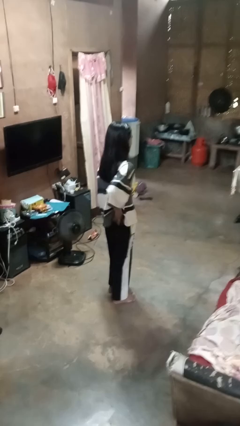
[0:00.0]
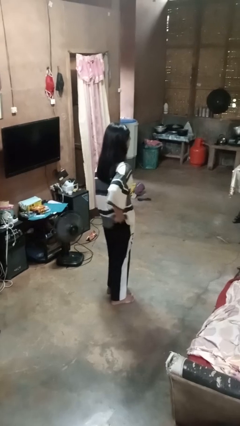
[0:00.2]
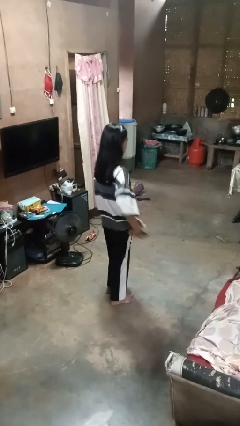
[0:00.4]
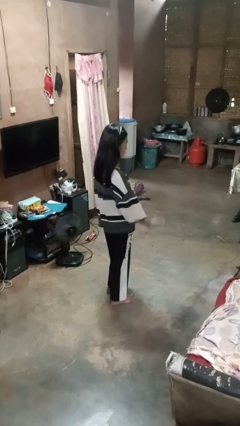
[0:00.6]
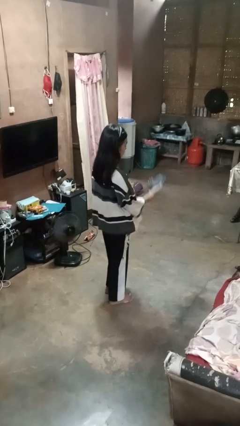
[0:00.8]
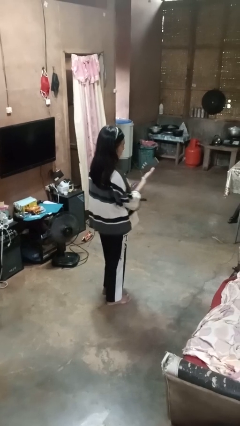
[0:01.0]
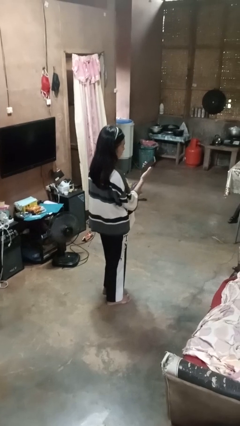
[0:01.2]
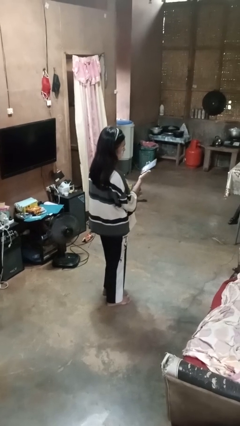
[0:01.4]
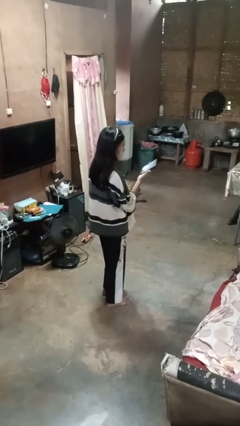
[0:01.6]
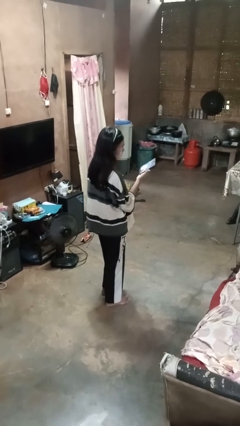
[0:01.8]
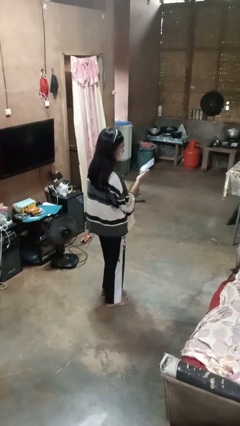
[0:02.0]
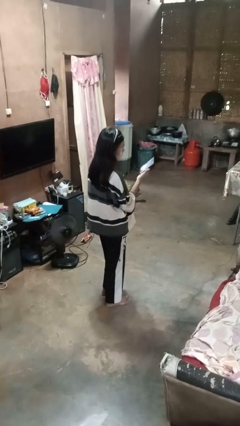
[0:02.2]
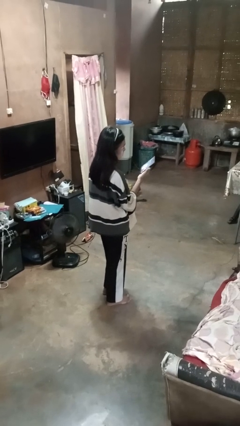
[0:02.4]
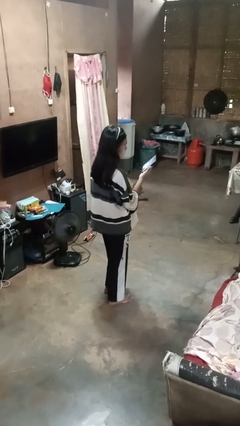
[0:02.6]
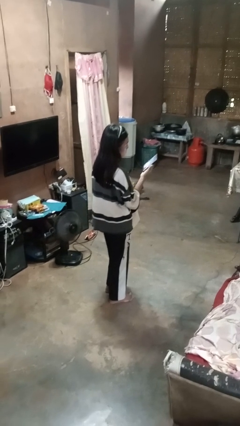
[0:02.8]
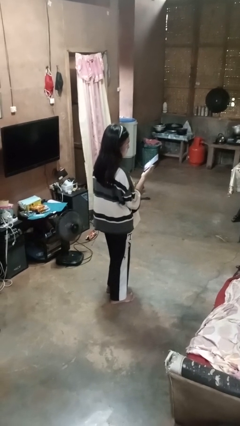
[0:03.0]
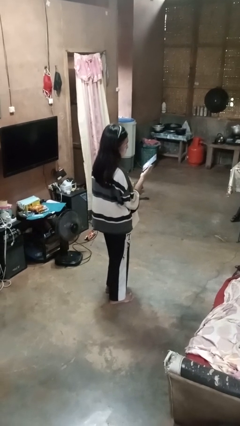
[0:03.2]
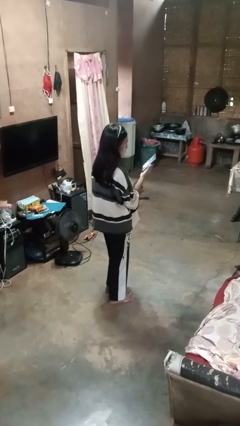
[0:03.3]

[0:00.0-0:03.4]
person takes phone from pocket

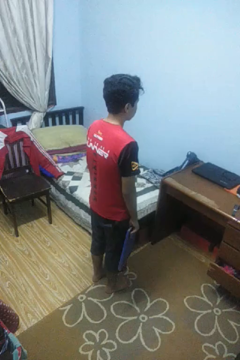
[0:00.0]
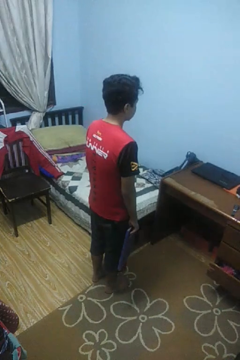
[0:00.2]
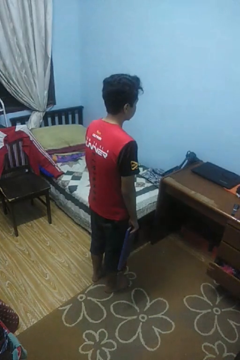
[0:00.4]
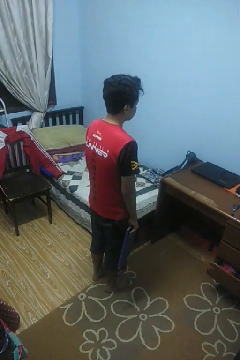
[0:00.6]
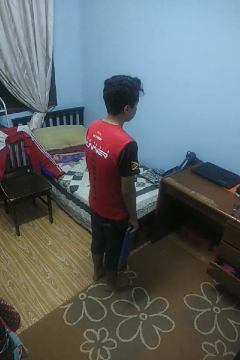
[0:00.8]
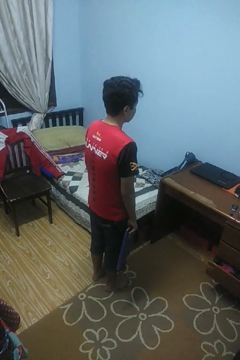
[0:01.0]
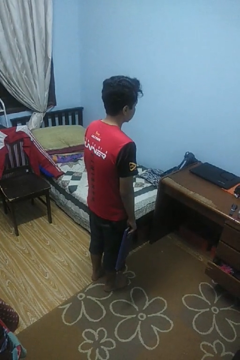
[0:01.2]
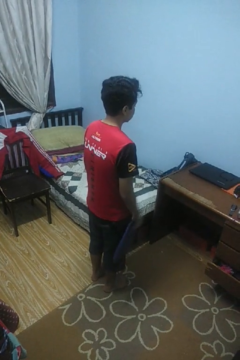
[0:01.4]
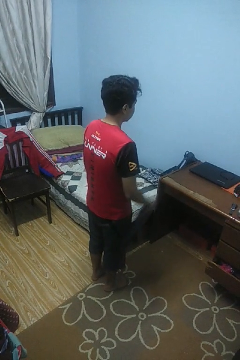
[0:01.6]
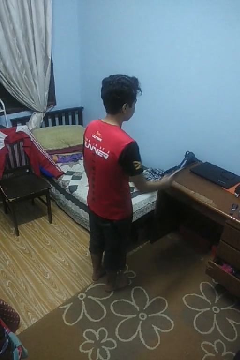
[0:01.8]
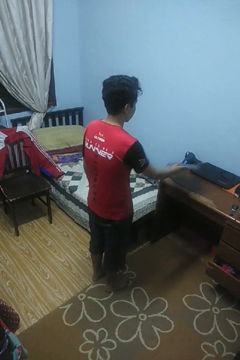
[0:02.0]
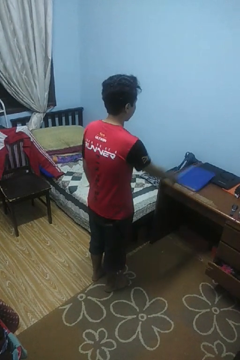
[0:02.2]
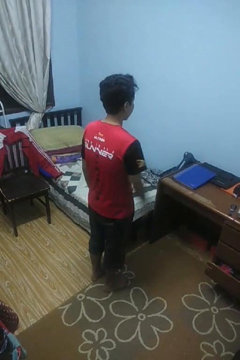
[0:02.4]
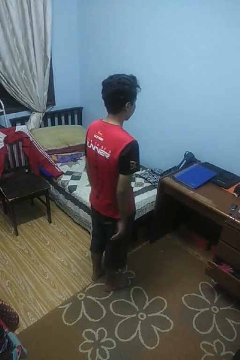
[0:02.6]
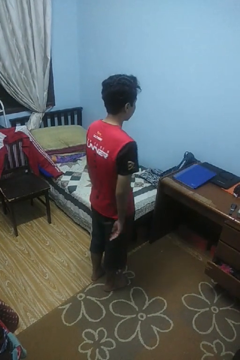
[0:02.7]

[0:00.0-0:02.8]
person throws object on table

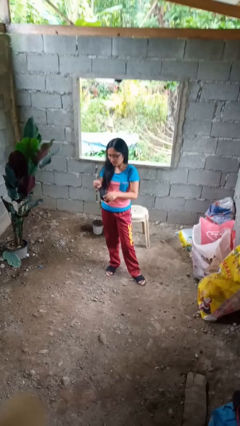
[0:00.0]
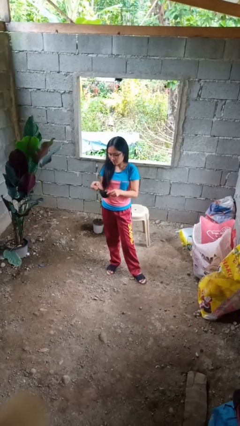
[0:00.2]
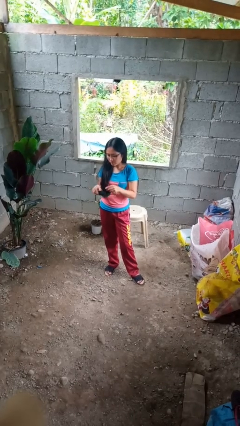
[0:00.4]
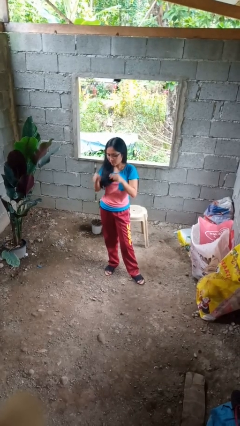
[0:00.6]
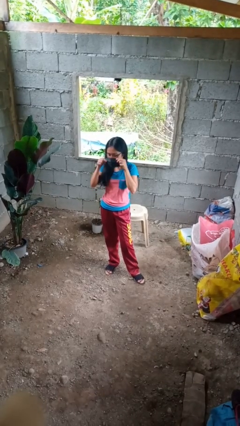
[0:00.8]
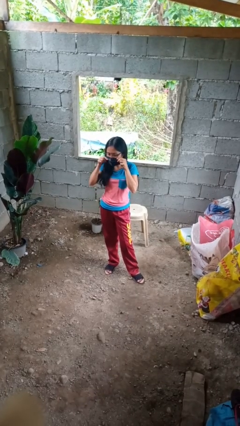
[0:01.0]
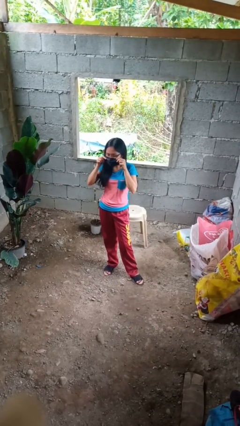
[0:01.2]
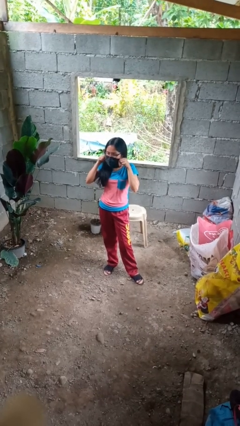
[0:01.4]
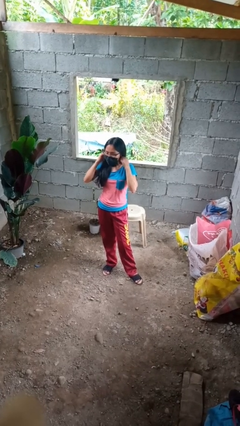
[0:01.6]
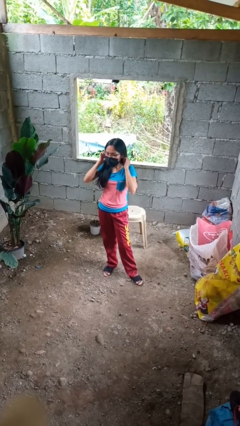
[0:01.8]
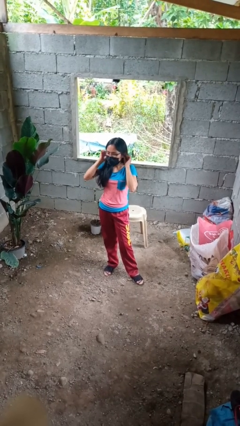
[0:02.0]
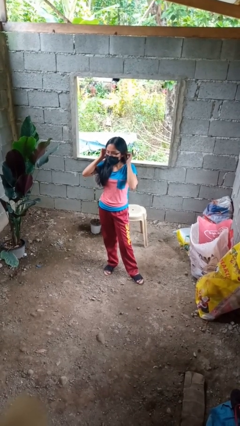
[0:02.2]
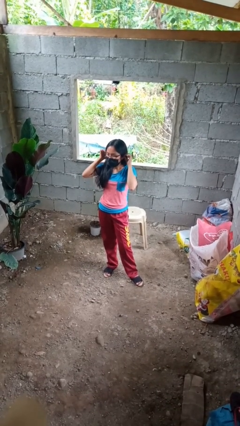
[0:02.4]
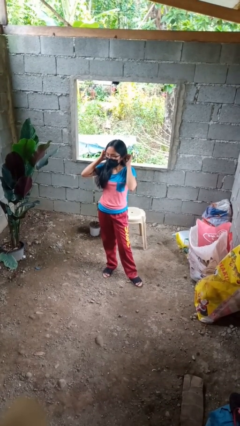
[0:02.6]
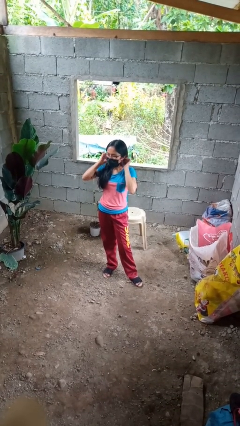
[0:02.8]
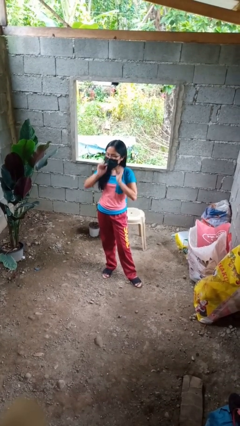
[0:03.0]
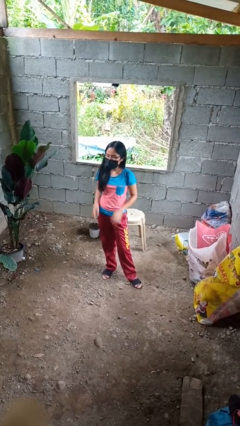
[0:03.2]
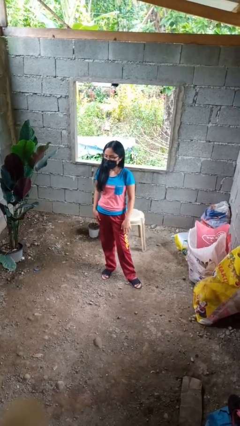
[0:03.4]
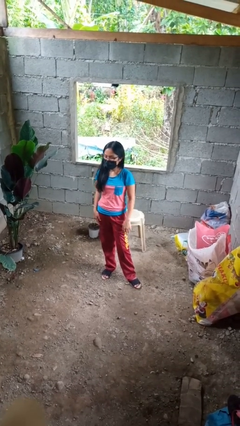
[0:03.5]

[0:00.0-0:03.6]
person puts on facemask

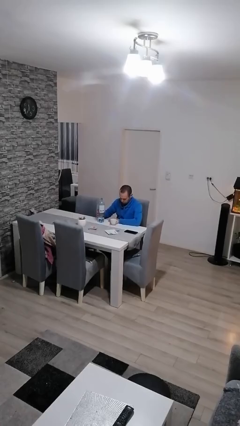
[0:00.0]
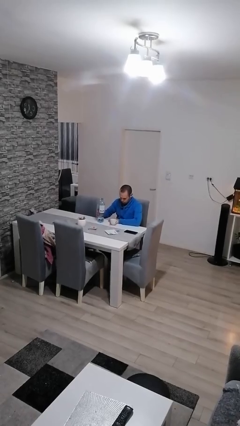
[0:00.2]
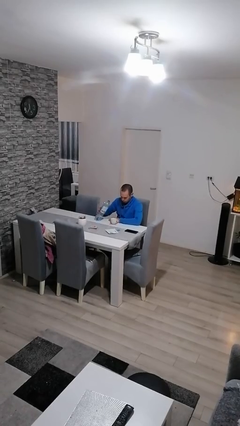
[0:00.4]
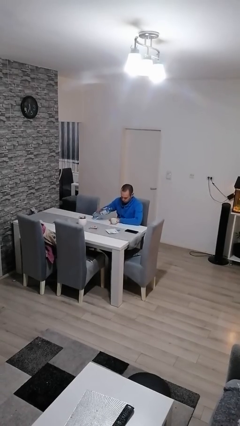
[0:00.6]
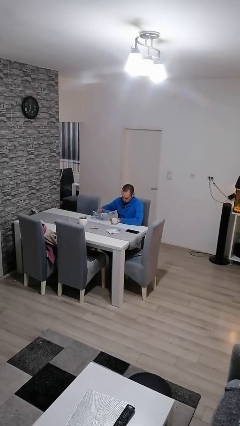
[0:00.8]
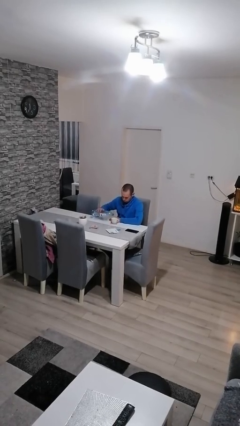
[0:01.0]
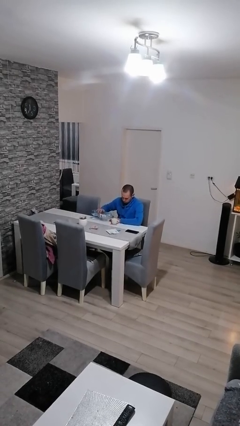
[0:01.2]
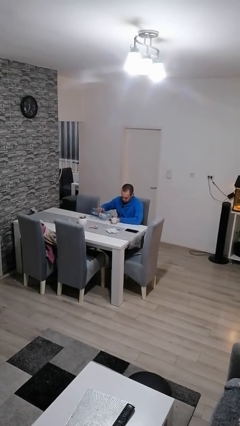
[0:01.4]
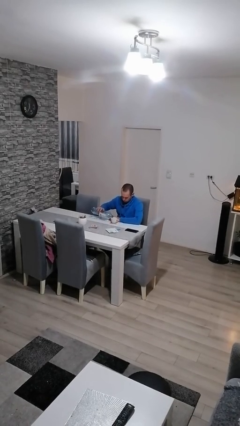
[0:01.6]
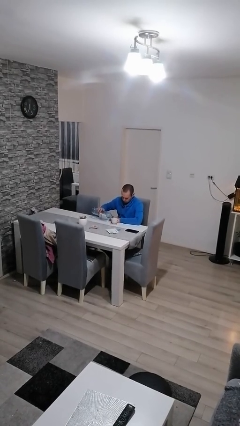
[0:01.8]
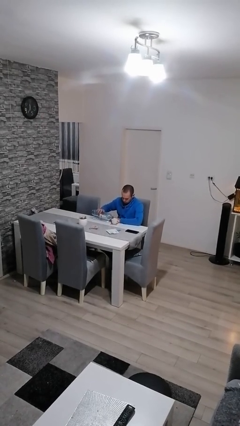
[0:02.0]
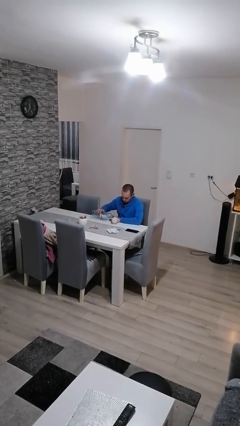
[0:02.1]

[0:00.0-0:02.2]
person pours liquid into cup

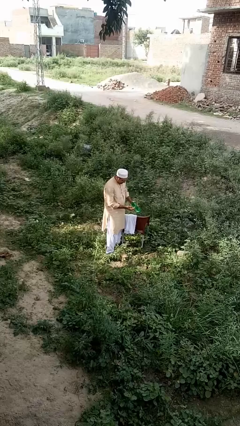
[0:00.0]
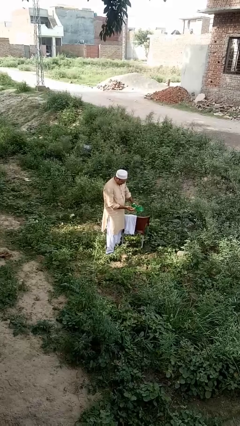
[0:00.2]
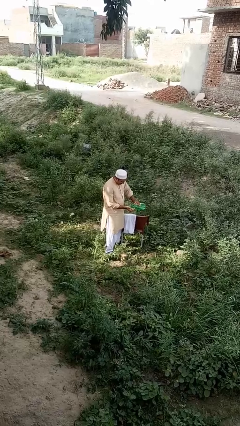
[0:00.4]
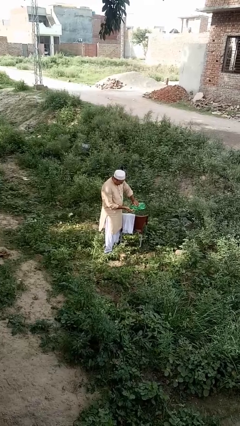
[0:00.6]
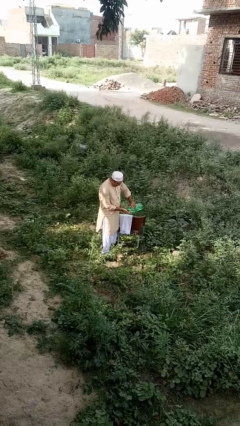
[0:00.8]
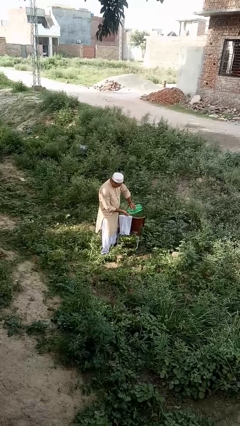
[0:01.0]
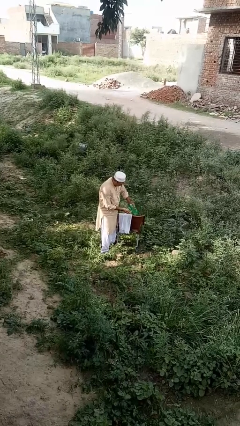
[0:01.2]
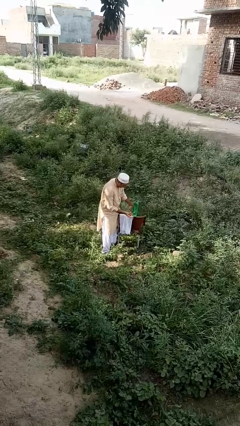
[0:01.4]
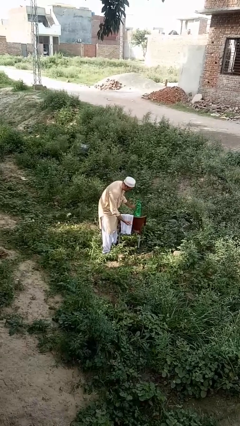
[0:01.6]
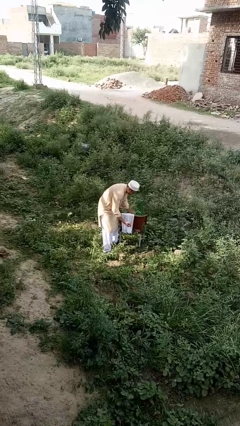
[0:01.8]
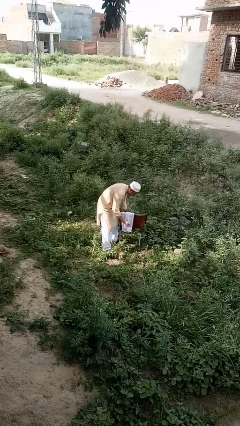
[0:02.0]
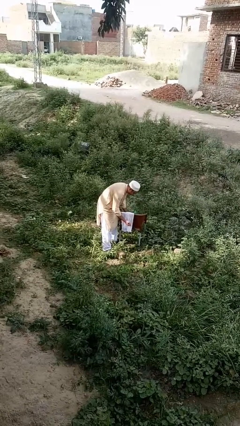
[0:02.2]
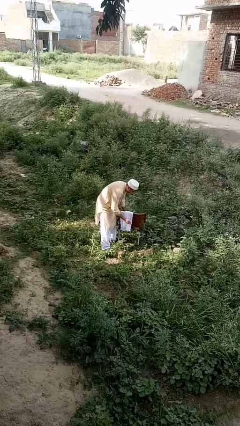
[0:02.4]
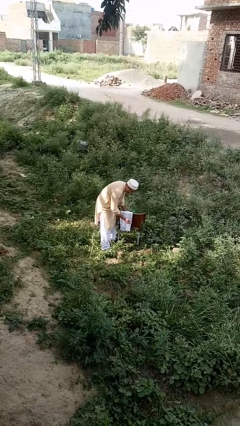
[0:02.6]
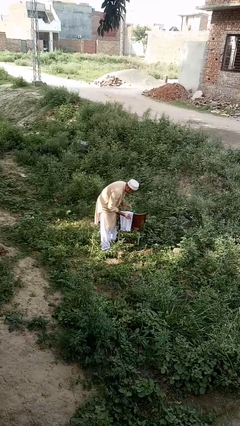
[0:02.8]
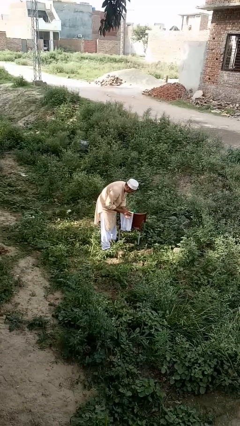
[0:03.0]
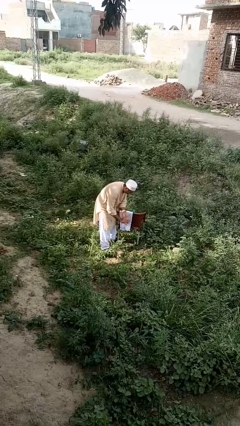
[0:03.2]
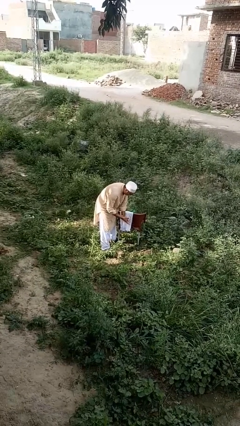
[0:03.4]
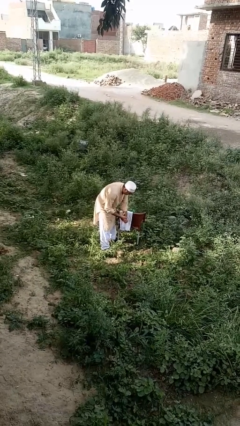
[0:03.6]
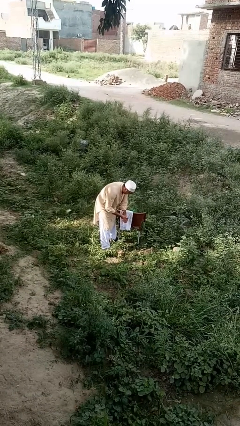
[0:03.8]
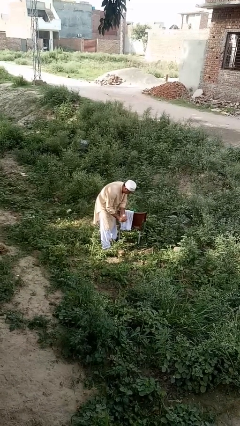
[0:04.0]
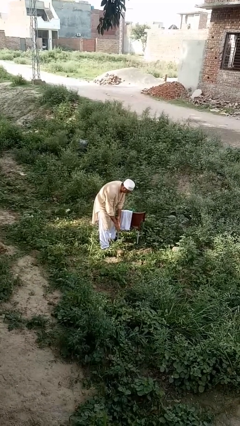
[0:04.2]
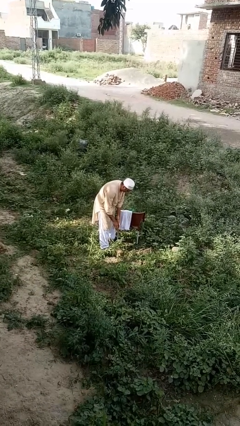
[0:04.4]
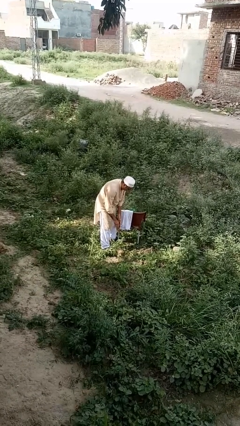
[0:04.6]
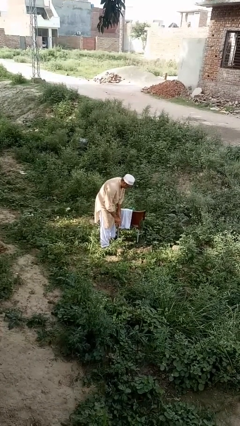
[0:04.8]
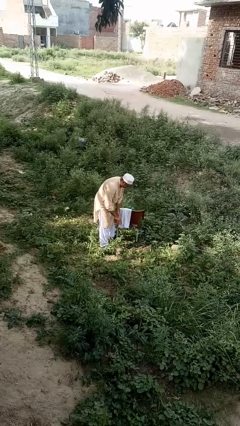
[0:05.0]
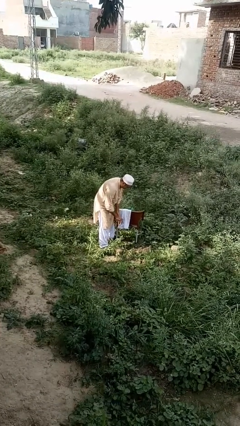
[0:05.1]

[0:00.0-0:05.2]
person washes hands

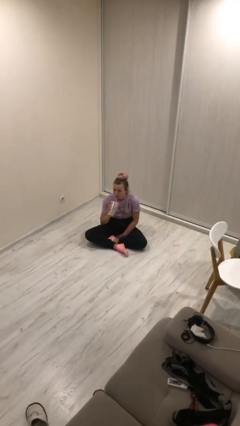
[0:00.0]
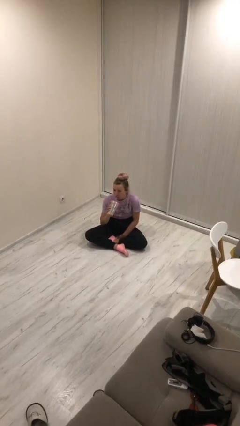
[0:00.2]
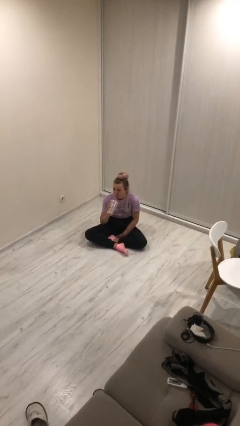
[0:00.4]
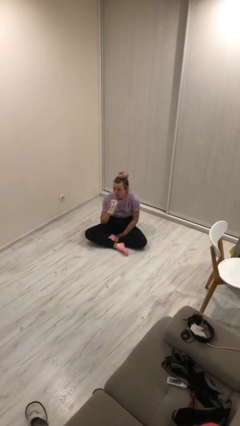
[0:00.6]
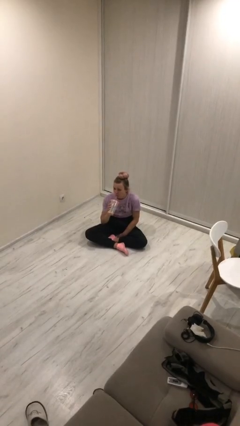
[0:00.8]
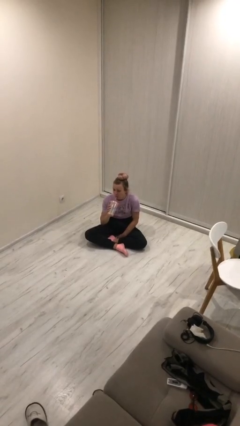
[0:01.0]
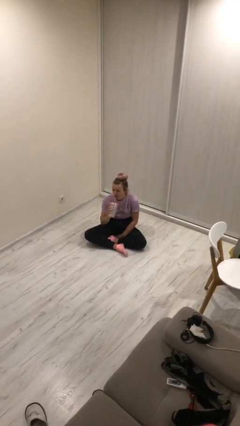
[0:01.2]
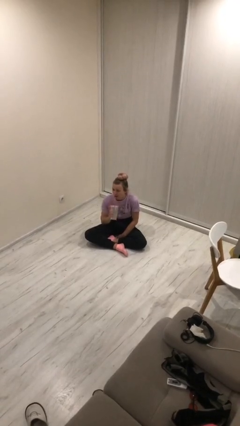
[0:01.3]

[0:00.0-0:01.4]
person drinks from straw
